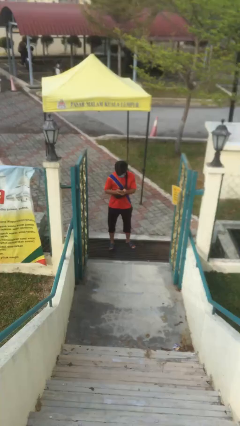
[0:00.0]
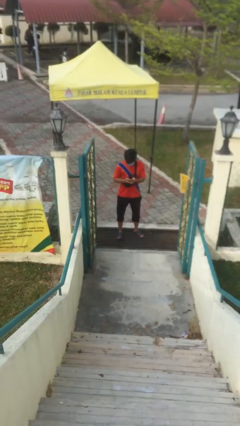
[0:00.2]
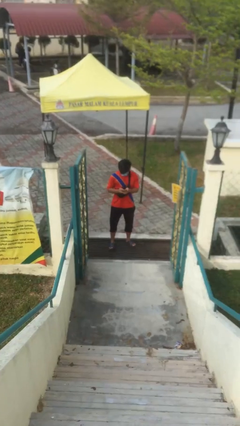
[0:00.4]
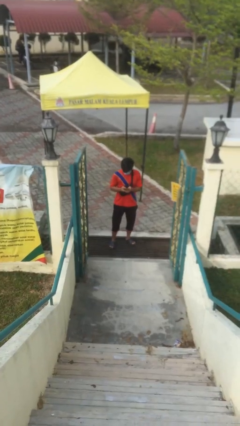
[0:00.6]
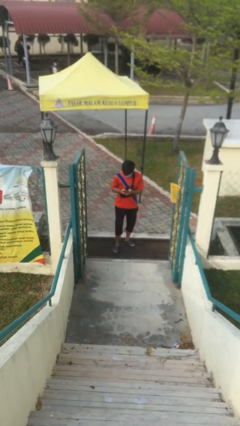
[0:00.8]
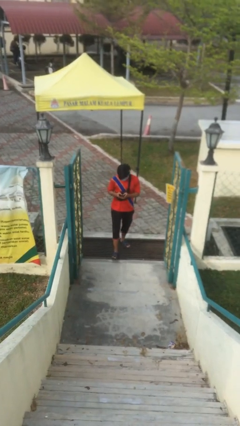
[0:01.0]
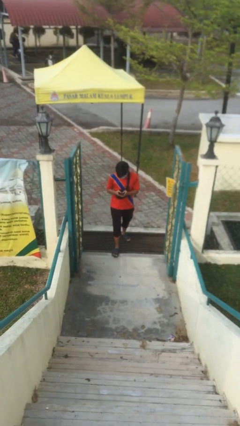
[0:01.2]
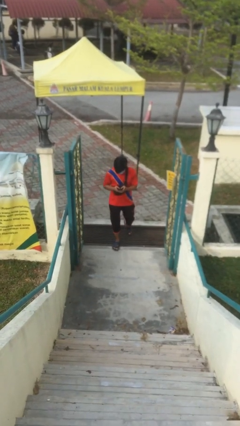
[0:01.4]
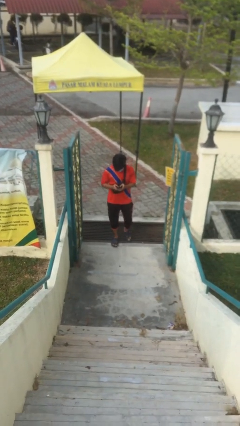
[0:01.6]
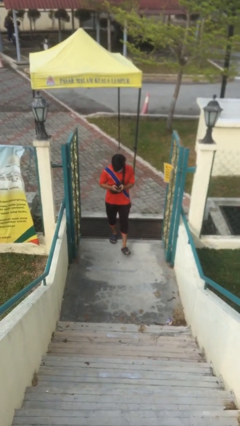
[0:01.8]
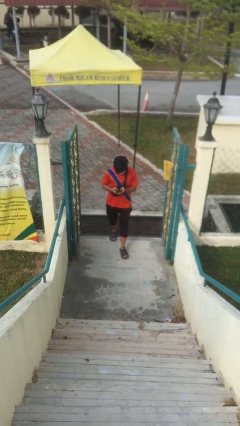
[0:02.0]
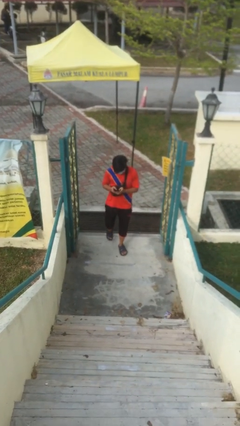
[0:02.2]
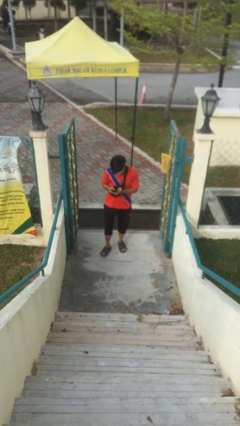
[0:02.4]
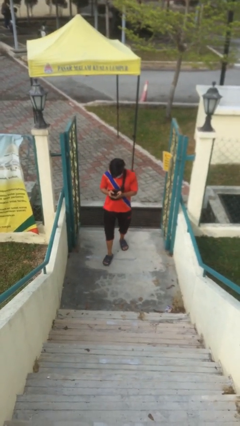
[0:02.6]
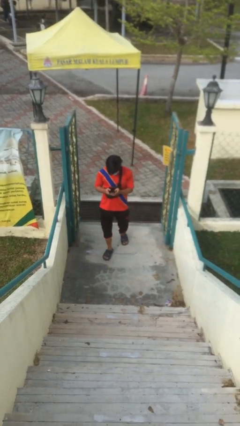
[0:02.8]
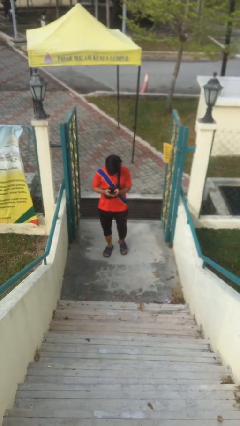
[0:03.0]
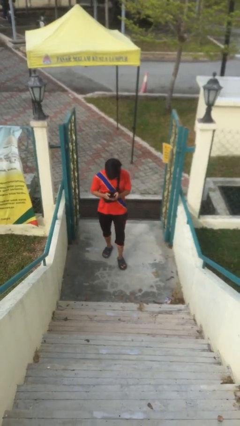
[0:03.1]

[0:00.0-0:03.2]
person enters scene through structure

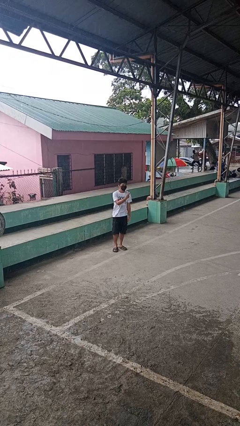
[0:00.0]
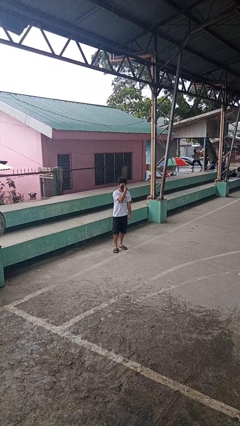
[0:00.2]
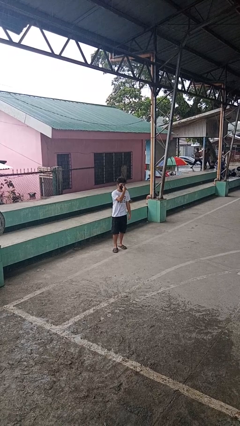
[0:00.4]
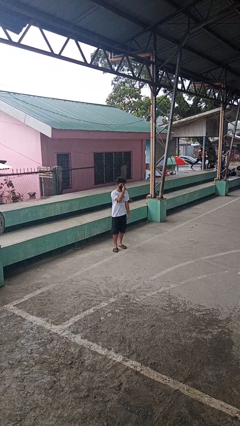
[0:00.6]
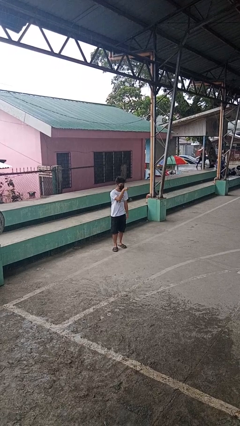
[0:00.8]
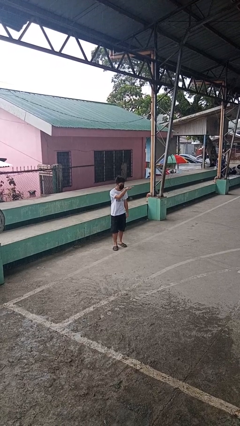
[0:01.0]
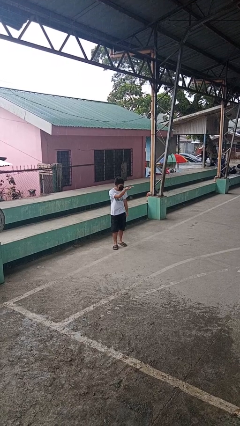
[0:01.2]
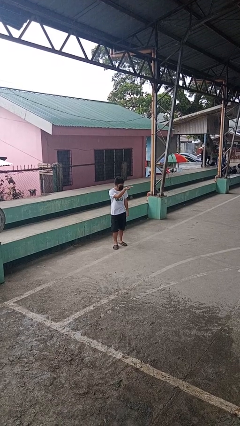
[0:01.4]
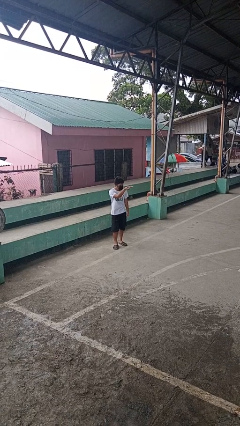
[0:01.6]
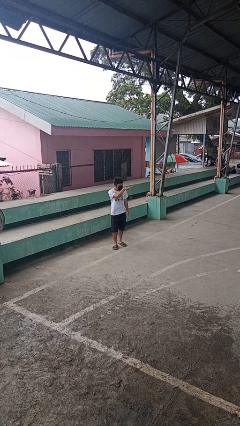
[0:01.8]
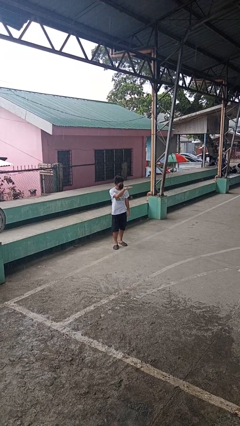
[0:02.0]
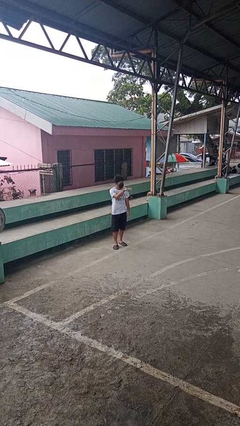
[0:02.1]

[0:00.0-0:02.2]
person gestures watch closely

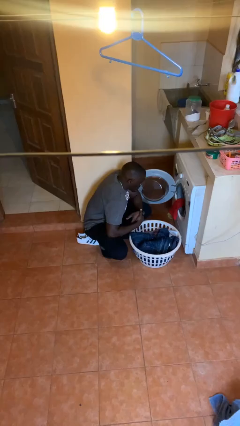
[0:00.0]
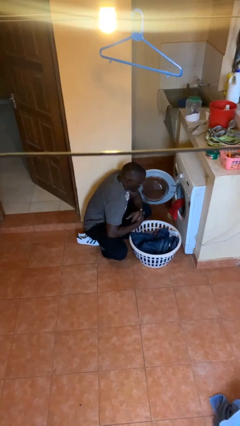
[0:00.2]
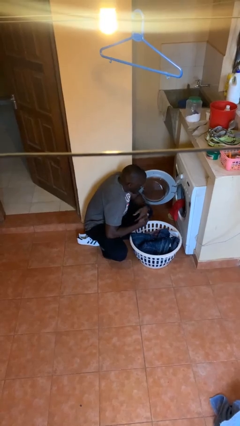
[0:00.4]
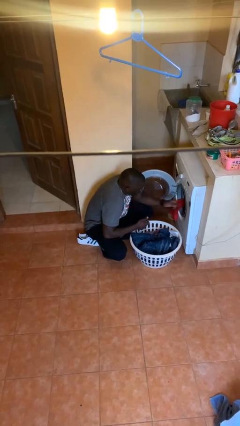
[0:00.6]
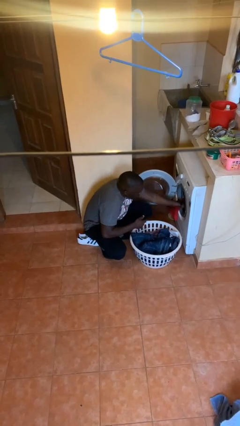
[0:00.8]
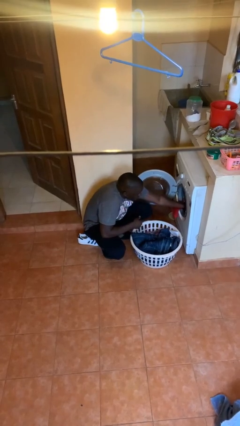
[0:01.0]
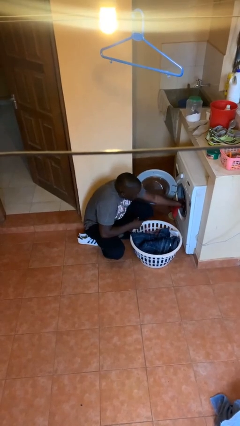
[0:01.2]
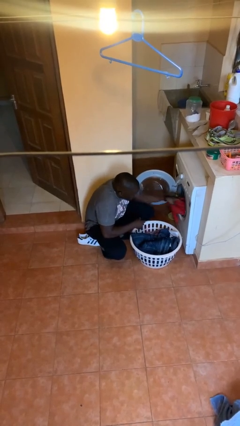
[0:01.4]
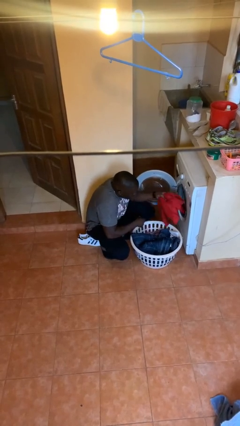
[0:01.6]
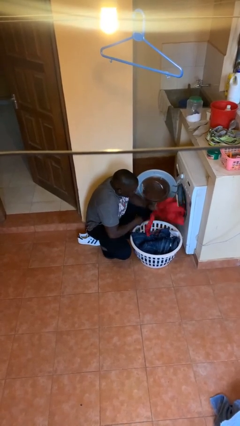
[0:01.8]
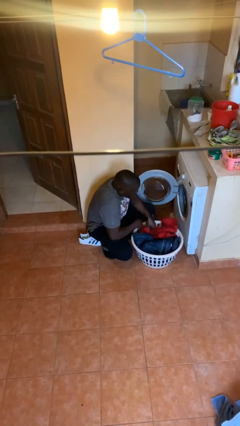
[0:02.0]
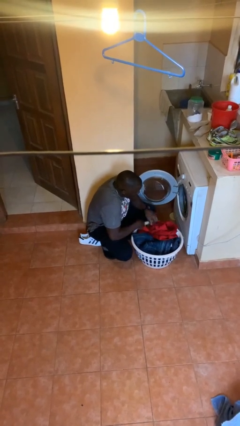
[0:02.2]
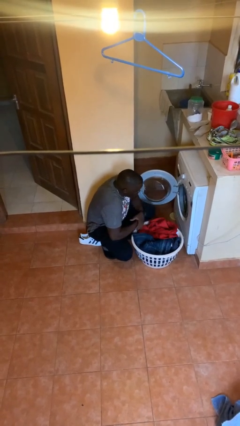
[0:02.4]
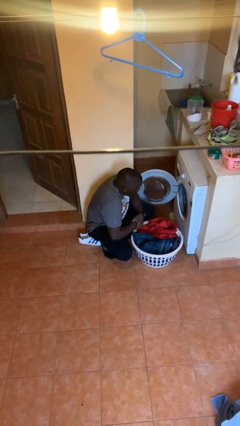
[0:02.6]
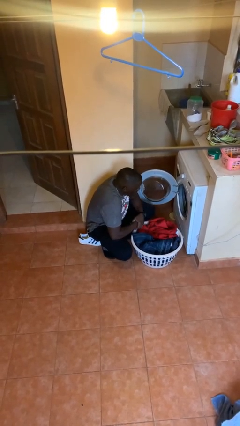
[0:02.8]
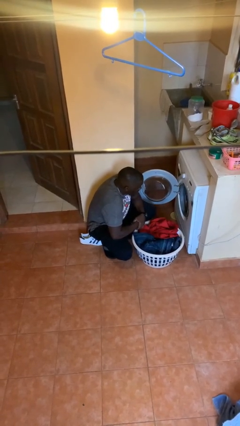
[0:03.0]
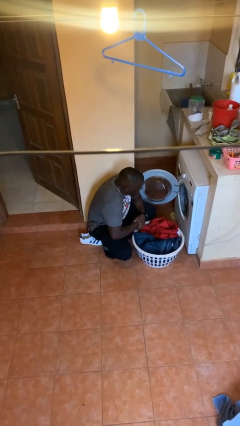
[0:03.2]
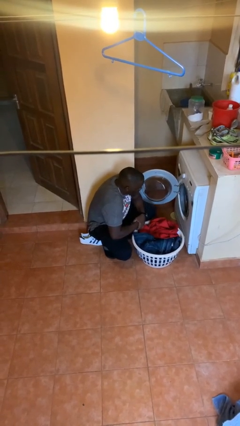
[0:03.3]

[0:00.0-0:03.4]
person unloads dryer

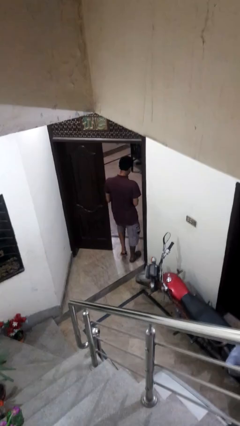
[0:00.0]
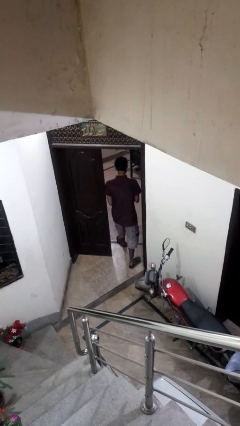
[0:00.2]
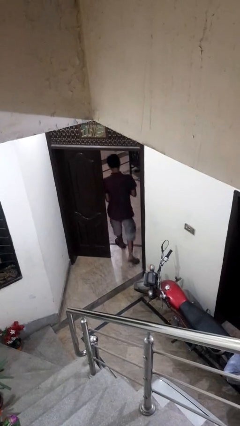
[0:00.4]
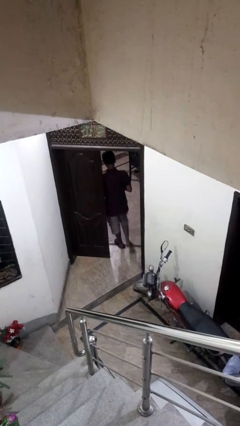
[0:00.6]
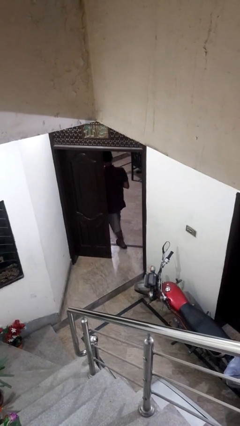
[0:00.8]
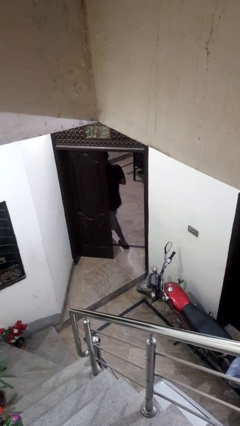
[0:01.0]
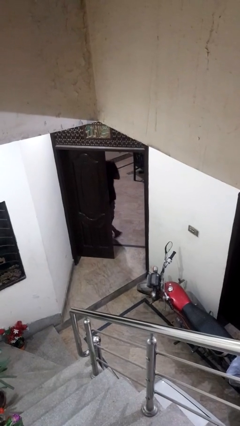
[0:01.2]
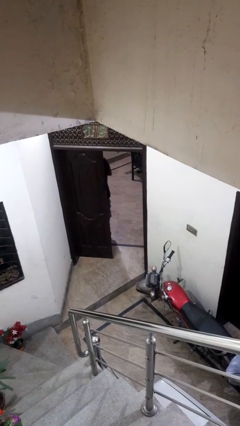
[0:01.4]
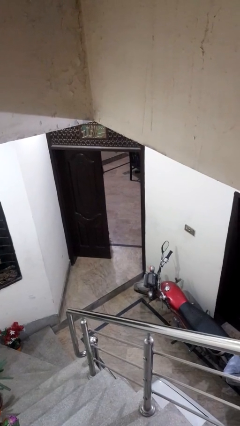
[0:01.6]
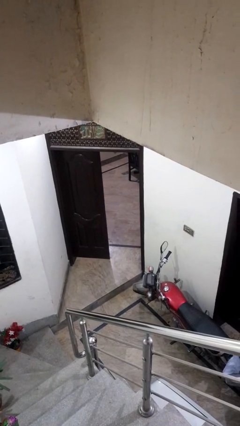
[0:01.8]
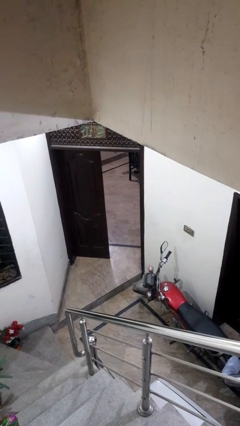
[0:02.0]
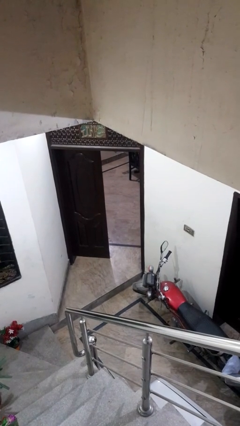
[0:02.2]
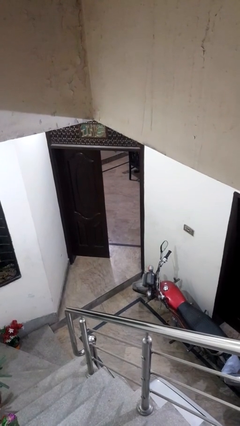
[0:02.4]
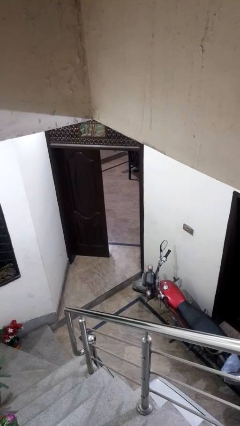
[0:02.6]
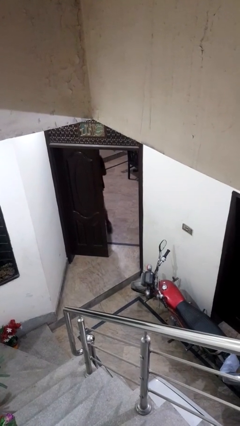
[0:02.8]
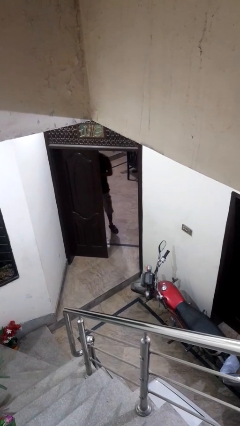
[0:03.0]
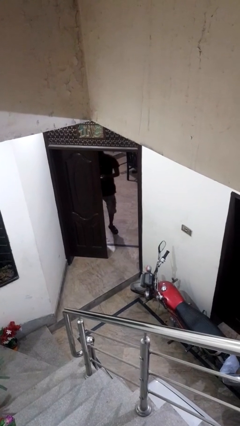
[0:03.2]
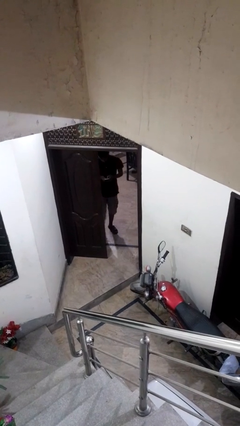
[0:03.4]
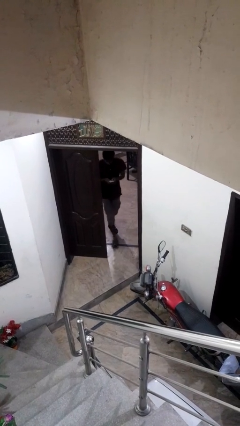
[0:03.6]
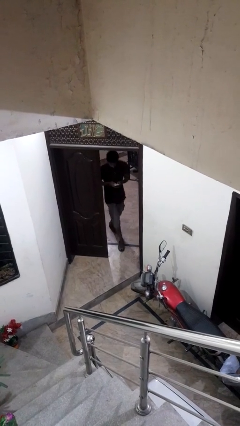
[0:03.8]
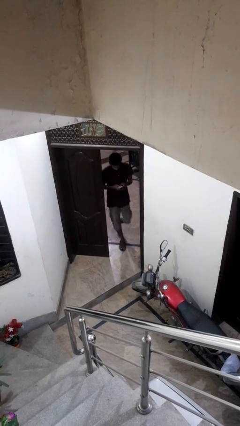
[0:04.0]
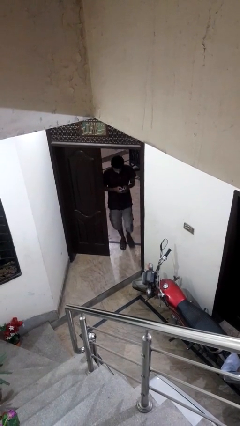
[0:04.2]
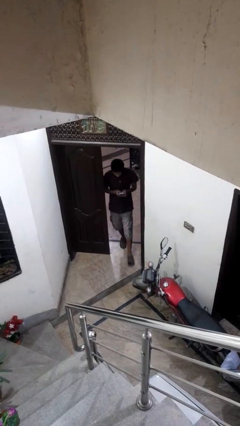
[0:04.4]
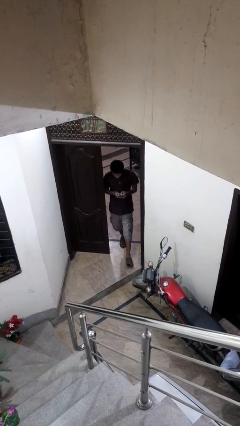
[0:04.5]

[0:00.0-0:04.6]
person exits scene through structure

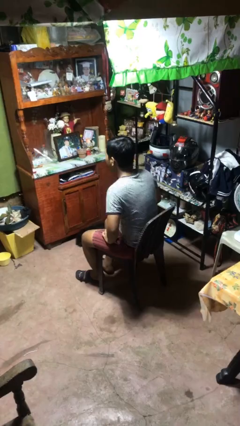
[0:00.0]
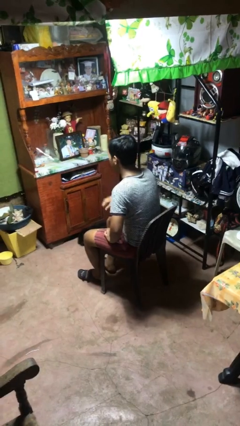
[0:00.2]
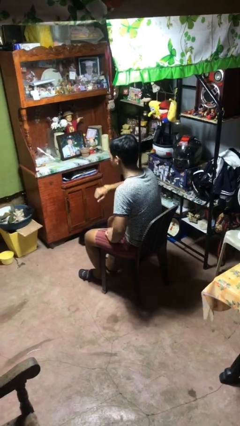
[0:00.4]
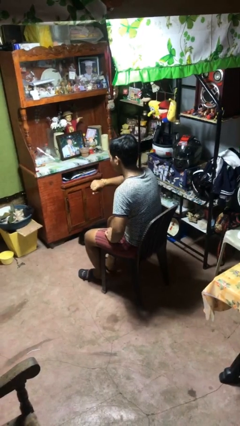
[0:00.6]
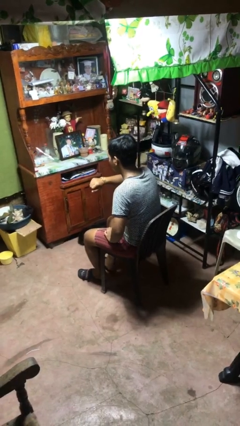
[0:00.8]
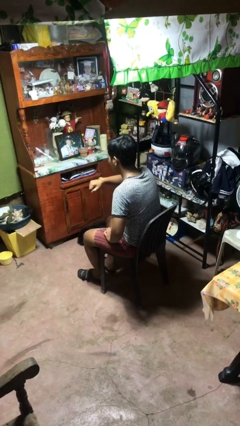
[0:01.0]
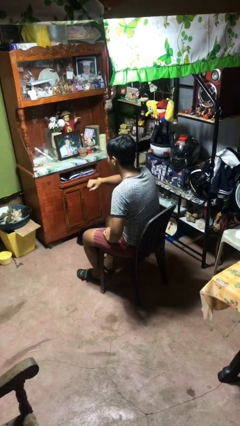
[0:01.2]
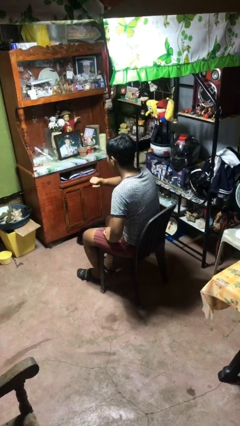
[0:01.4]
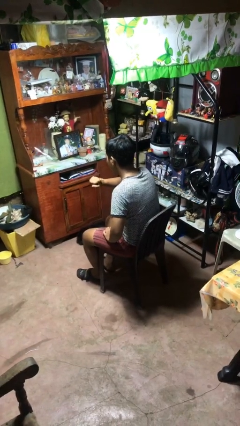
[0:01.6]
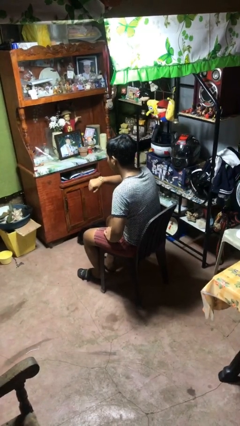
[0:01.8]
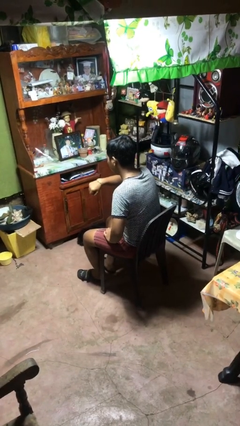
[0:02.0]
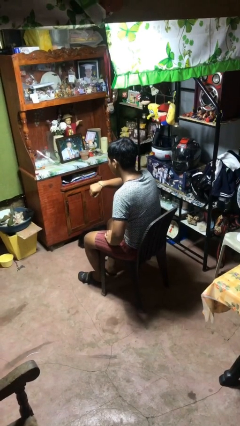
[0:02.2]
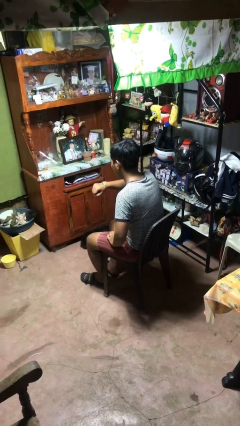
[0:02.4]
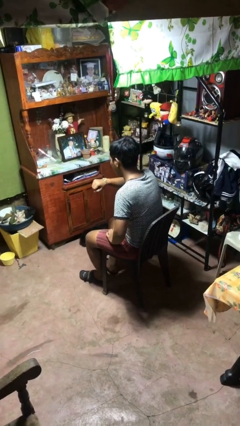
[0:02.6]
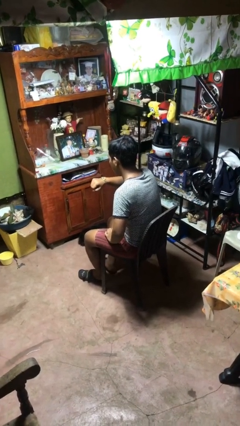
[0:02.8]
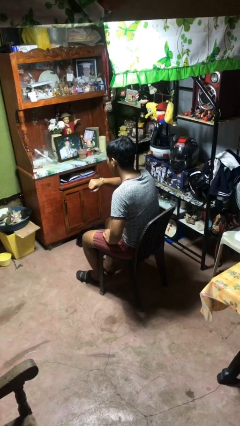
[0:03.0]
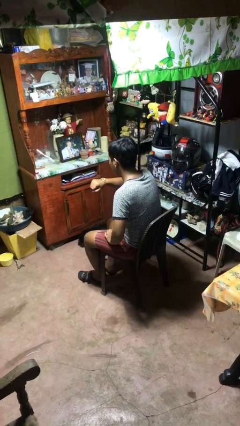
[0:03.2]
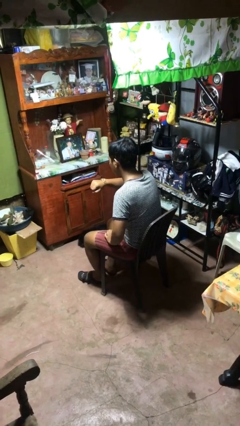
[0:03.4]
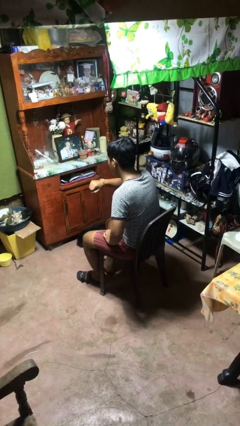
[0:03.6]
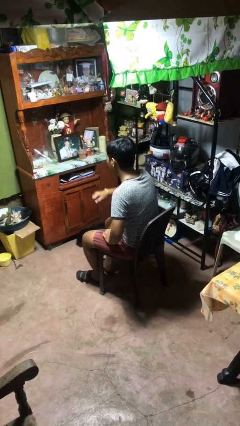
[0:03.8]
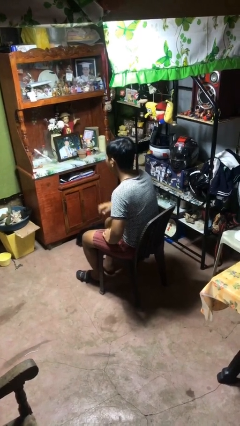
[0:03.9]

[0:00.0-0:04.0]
person looks at wristwatch

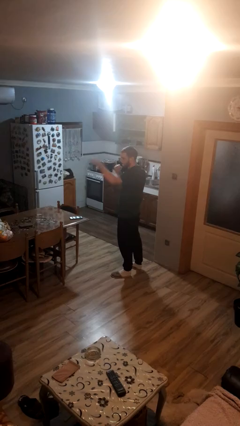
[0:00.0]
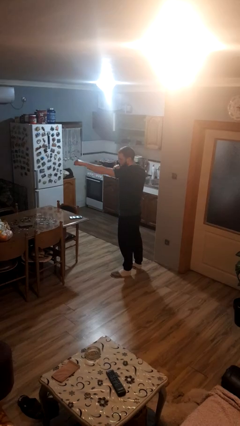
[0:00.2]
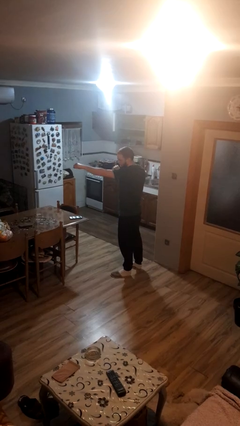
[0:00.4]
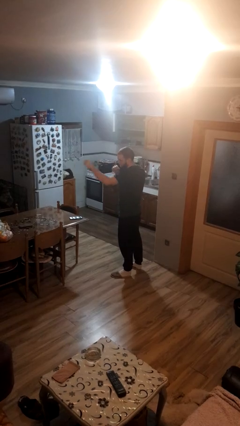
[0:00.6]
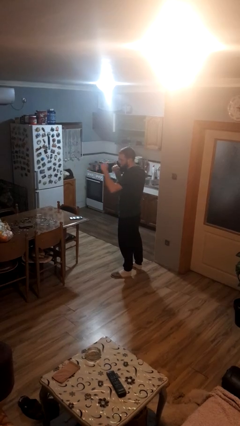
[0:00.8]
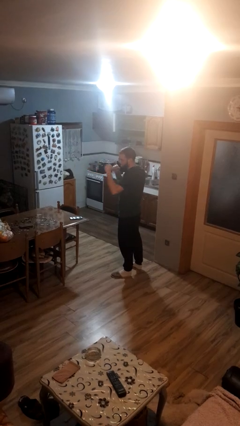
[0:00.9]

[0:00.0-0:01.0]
person punches
